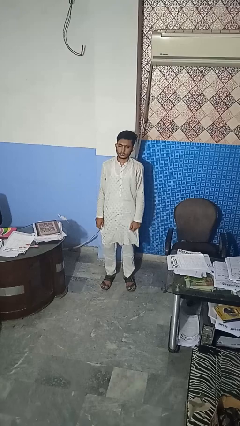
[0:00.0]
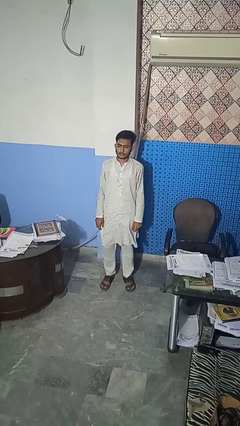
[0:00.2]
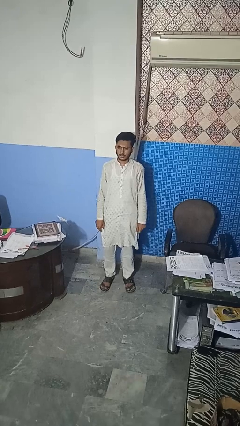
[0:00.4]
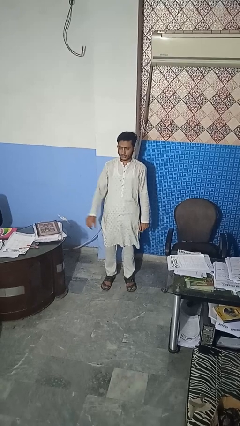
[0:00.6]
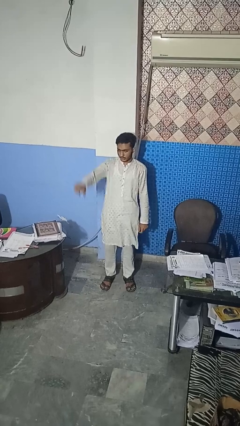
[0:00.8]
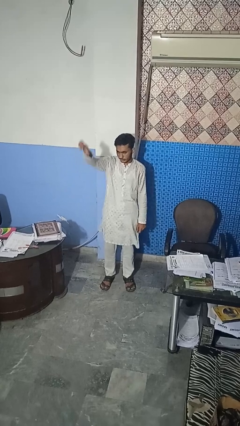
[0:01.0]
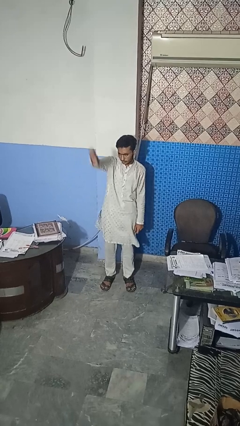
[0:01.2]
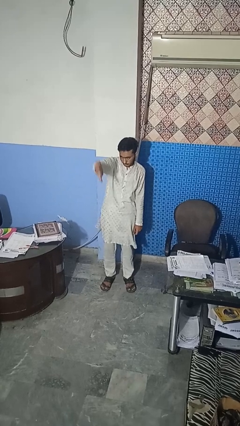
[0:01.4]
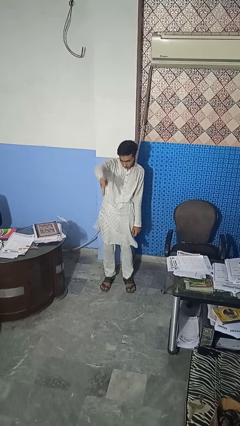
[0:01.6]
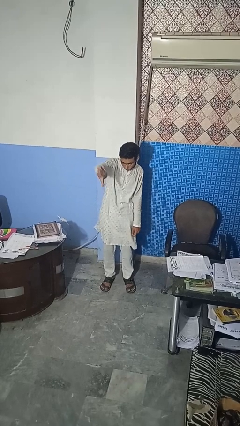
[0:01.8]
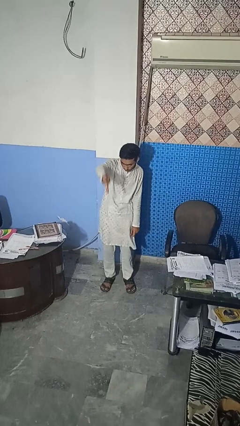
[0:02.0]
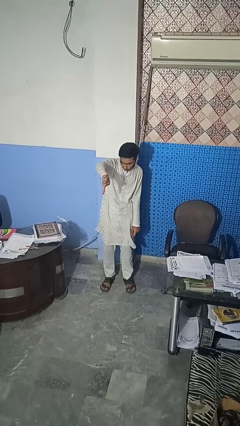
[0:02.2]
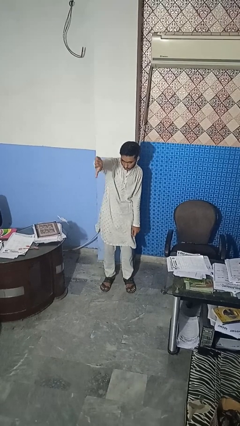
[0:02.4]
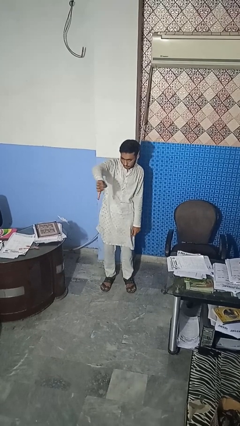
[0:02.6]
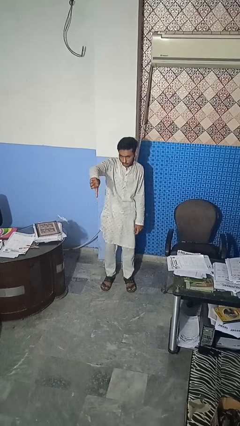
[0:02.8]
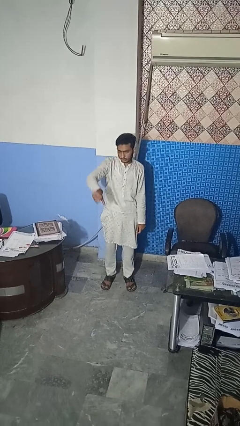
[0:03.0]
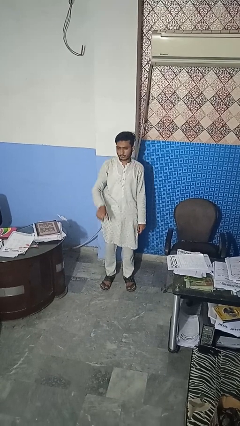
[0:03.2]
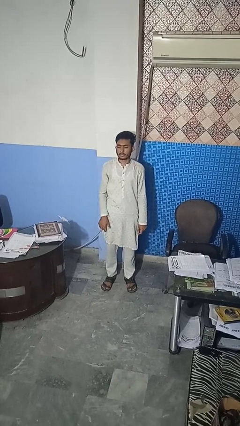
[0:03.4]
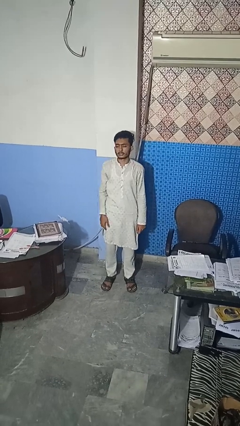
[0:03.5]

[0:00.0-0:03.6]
person gestures thumbs down

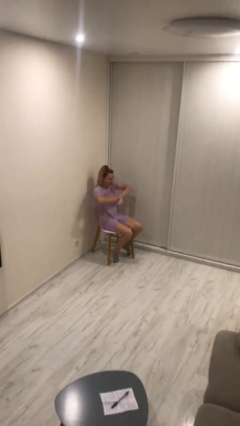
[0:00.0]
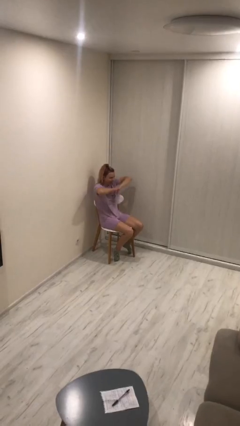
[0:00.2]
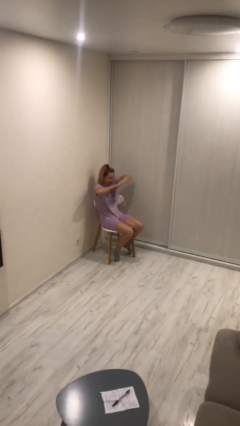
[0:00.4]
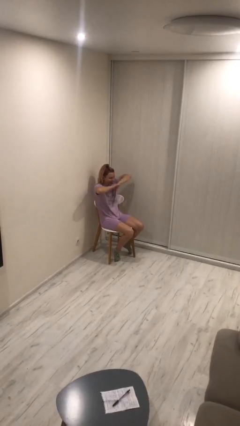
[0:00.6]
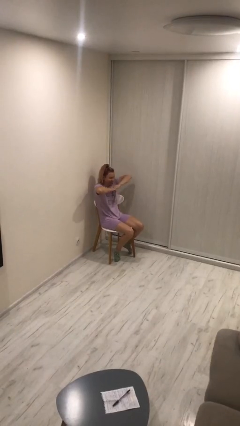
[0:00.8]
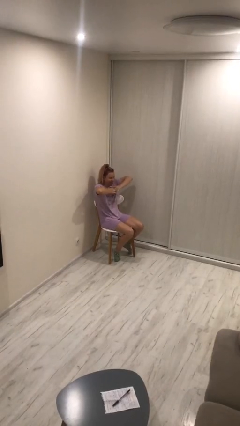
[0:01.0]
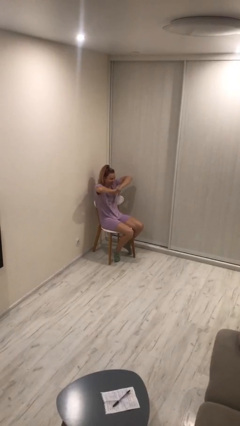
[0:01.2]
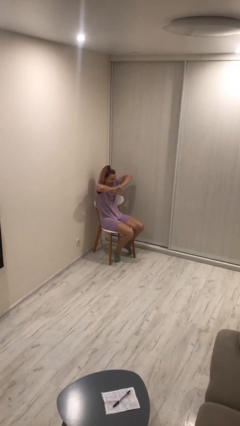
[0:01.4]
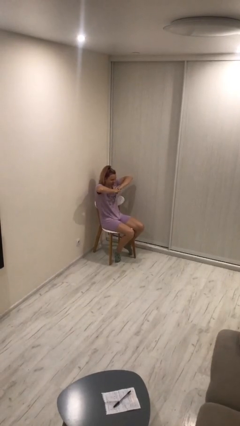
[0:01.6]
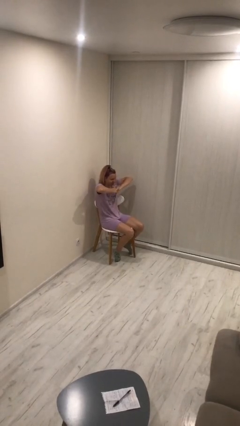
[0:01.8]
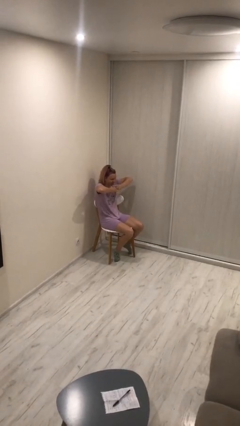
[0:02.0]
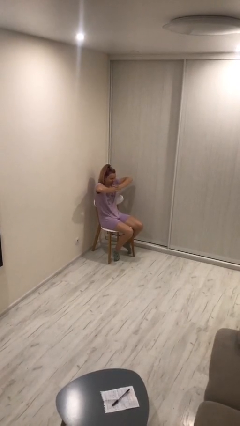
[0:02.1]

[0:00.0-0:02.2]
person cracks knuckles

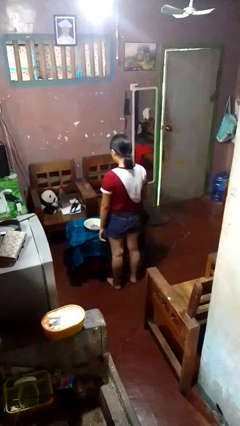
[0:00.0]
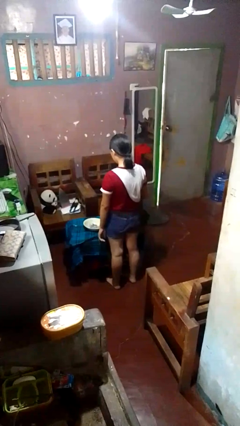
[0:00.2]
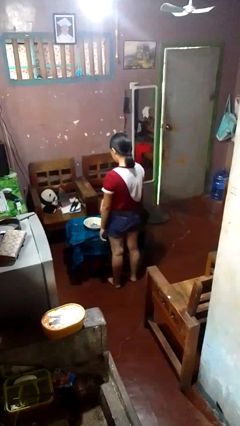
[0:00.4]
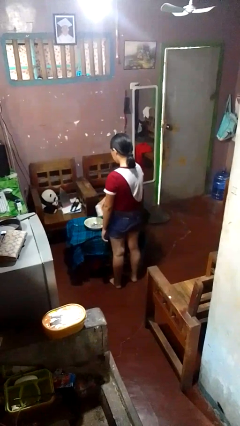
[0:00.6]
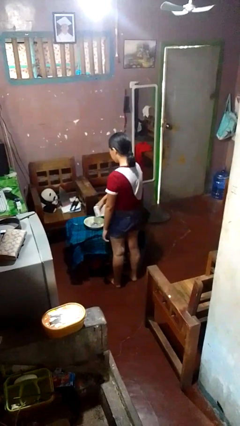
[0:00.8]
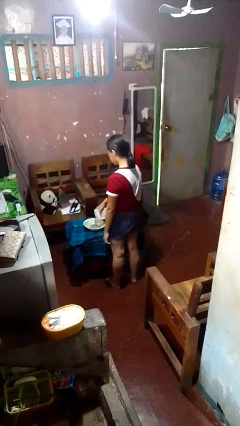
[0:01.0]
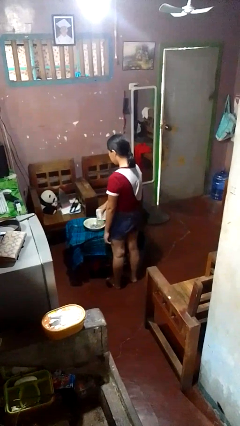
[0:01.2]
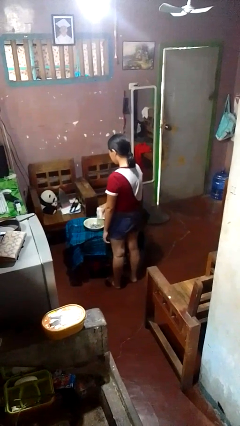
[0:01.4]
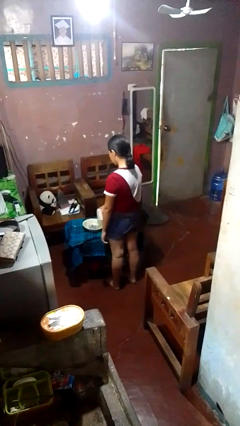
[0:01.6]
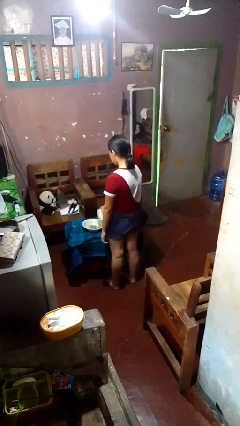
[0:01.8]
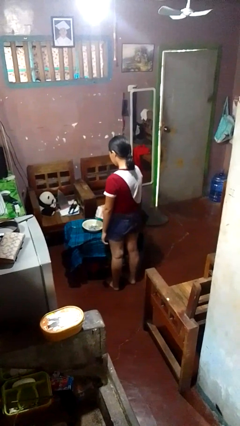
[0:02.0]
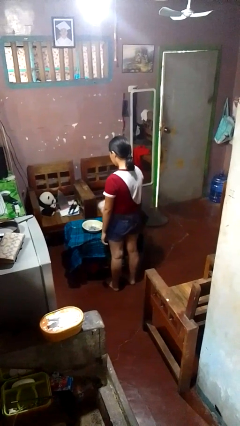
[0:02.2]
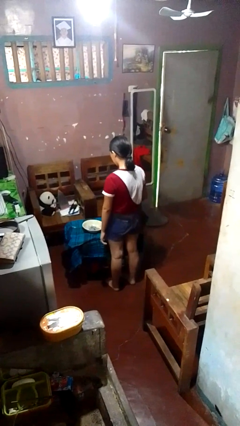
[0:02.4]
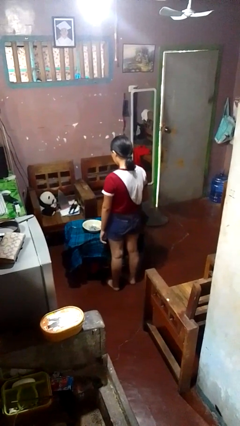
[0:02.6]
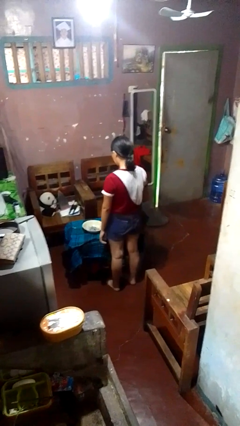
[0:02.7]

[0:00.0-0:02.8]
person pours into bowl

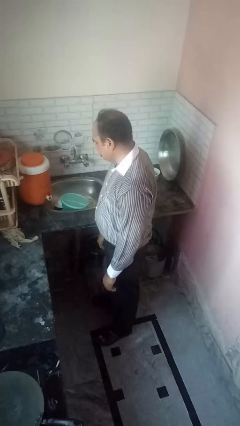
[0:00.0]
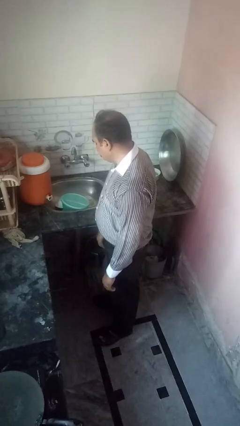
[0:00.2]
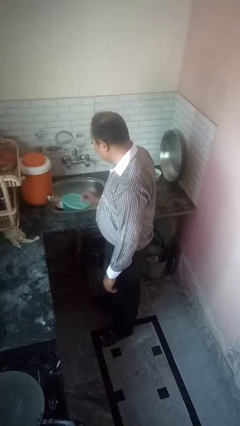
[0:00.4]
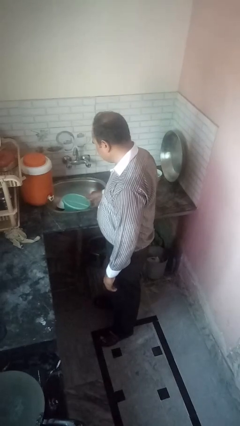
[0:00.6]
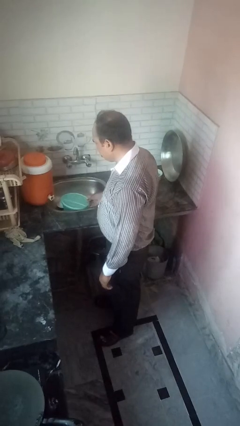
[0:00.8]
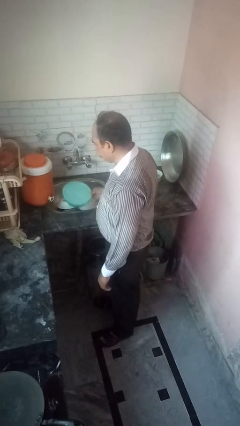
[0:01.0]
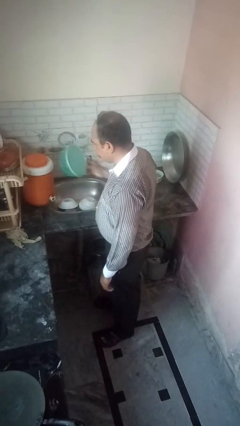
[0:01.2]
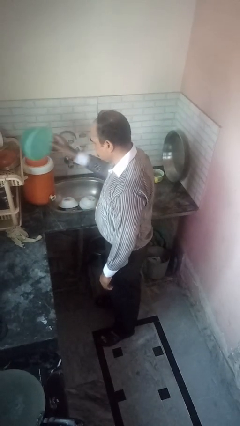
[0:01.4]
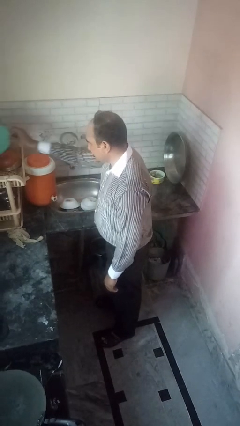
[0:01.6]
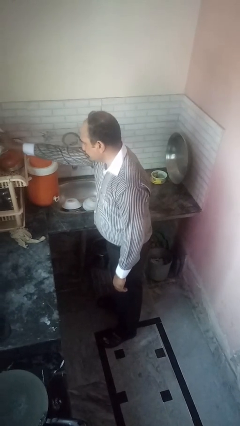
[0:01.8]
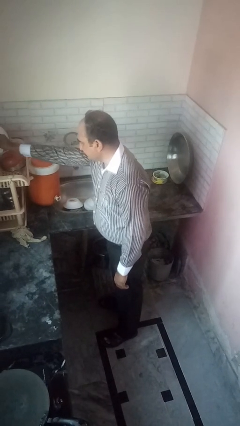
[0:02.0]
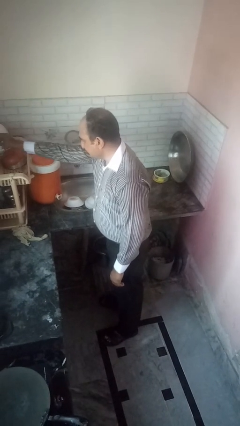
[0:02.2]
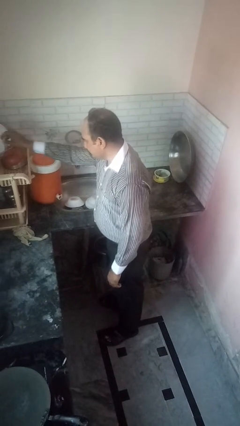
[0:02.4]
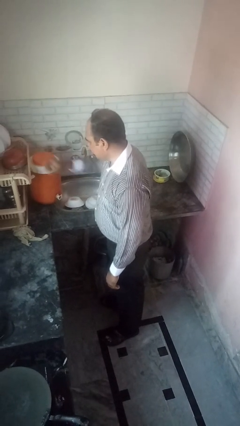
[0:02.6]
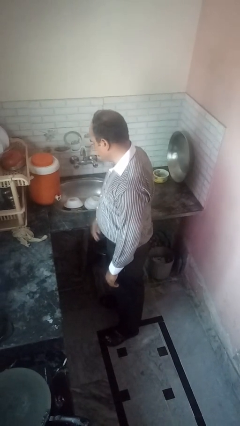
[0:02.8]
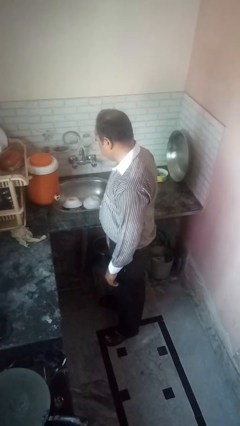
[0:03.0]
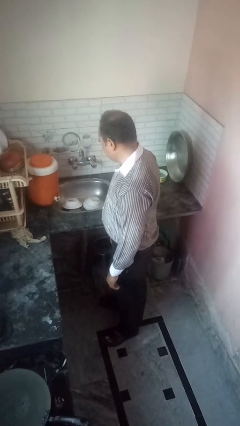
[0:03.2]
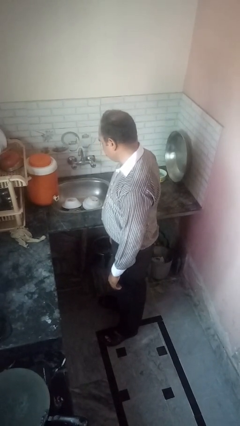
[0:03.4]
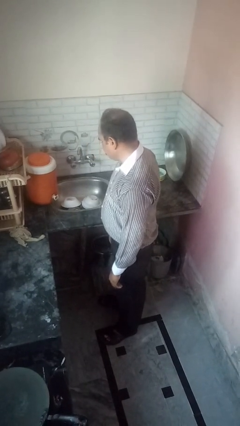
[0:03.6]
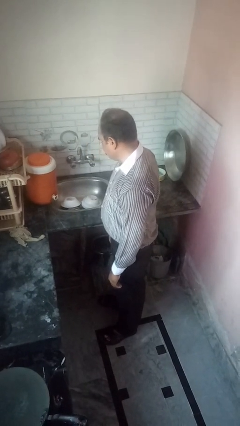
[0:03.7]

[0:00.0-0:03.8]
person unloads dishwasher

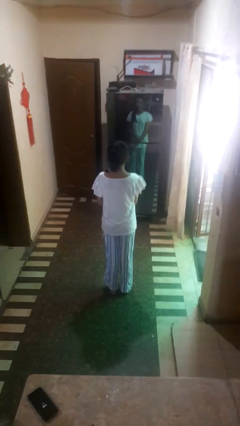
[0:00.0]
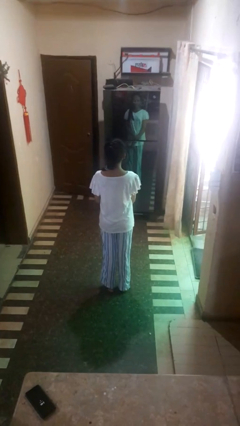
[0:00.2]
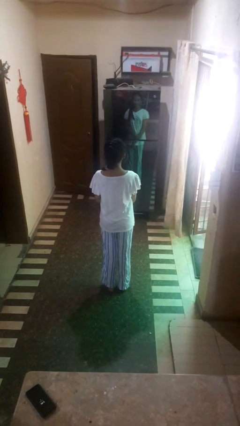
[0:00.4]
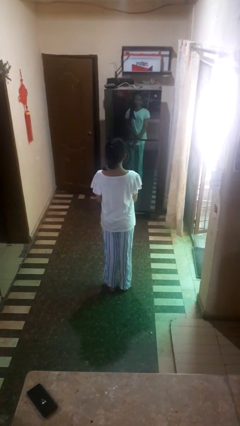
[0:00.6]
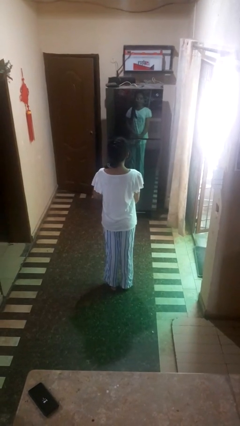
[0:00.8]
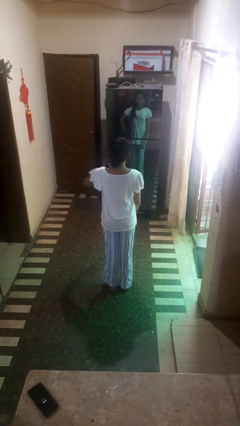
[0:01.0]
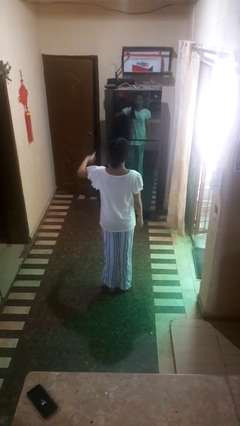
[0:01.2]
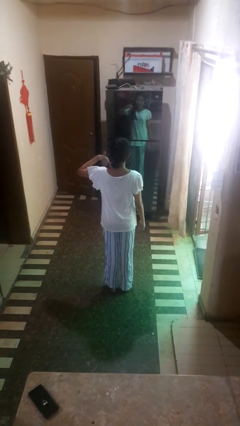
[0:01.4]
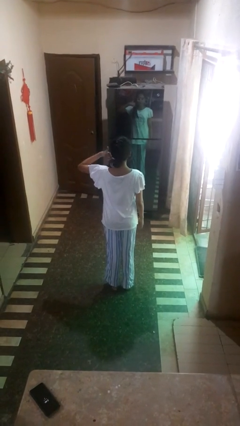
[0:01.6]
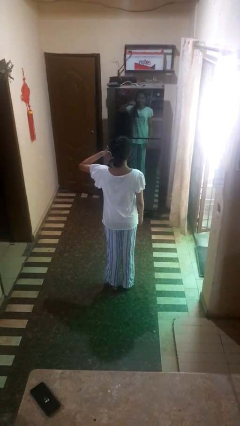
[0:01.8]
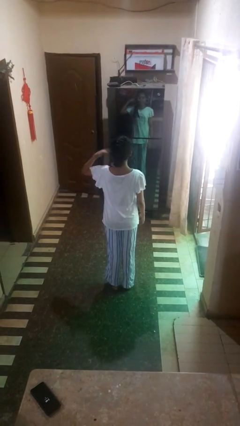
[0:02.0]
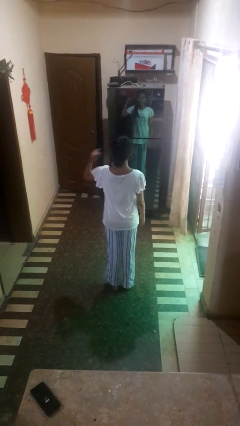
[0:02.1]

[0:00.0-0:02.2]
person gestures call me

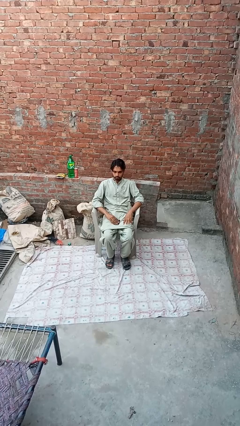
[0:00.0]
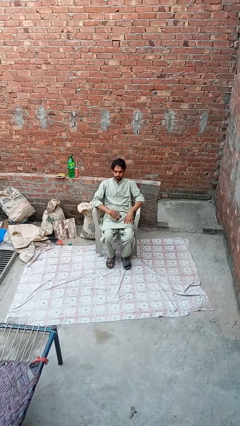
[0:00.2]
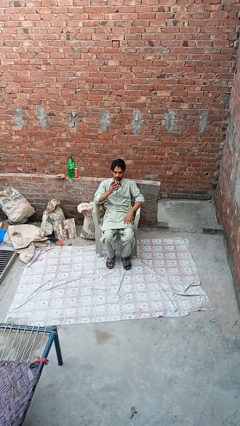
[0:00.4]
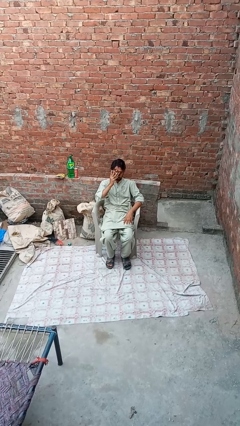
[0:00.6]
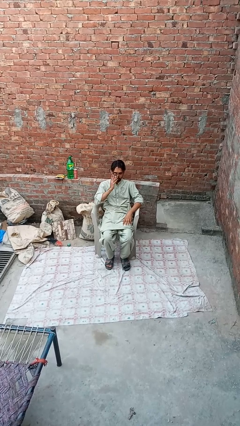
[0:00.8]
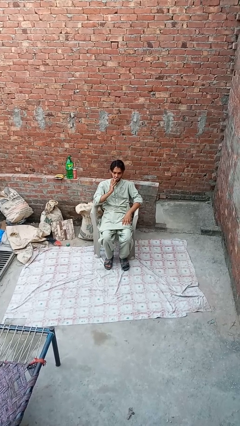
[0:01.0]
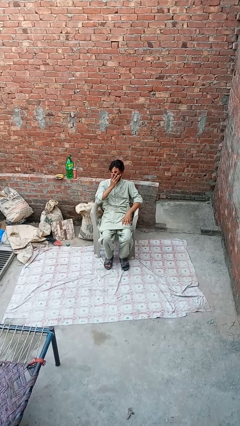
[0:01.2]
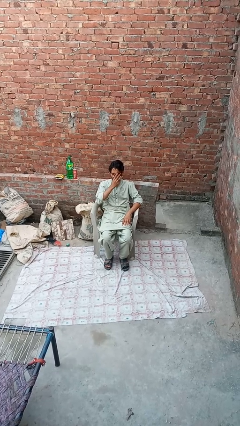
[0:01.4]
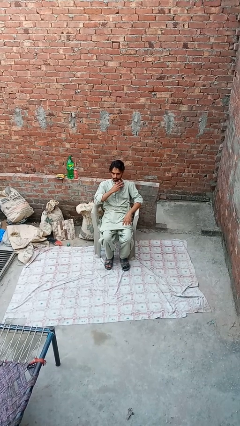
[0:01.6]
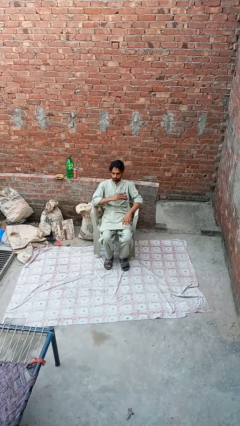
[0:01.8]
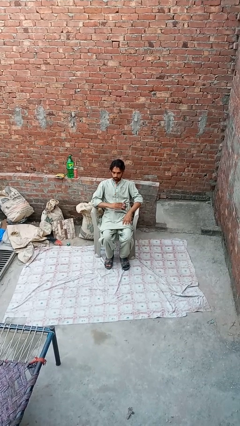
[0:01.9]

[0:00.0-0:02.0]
person wipes mouth with napkin

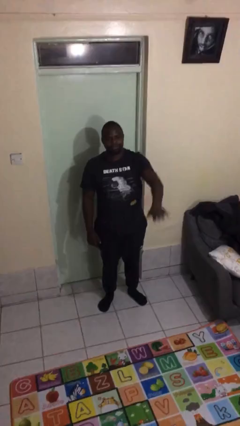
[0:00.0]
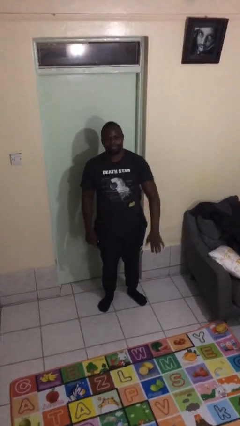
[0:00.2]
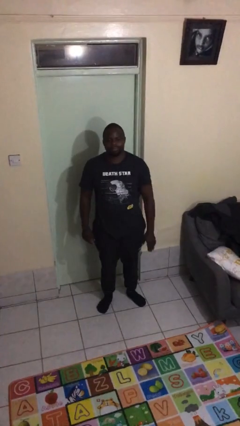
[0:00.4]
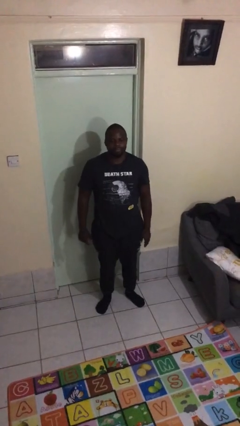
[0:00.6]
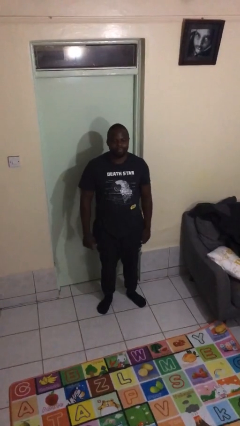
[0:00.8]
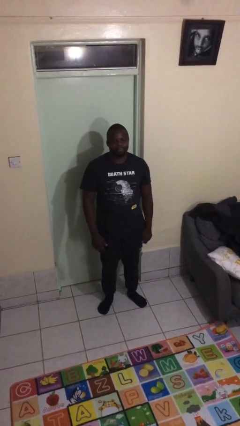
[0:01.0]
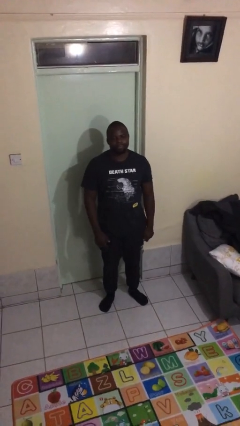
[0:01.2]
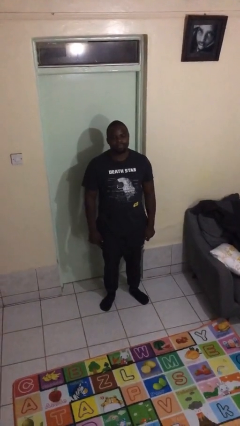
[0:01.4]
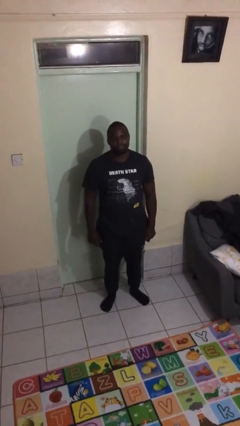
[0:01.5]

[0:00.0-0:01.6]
person gestures swipe down
